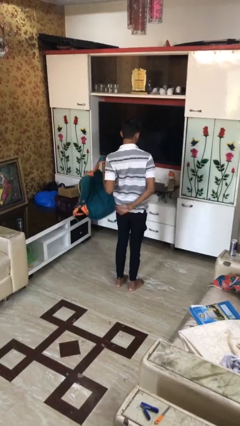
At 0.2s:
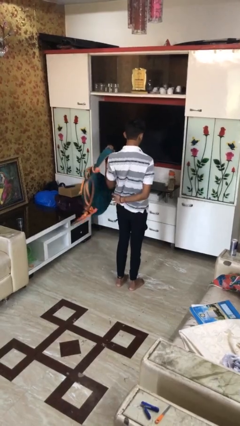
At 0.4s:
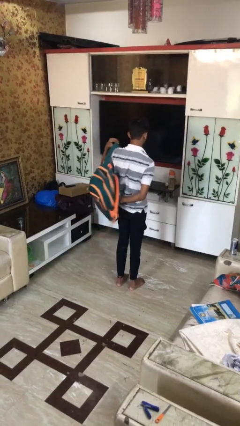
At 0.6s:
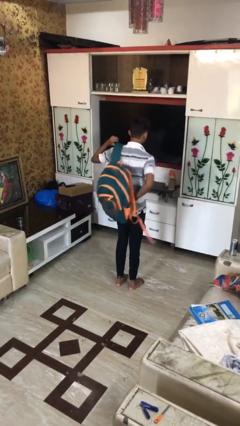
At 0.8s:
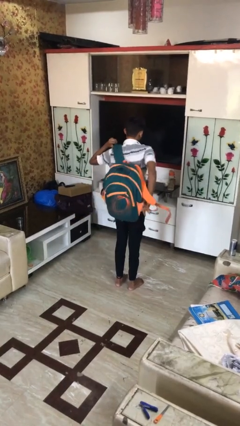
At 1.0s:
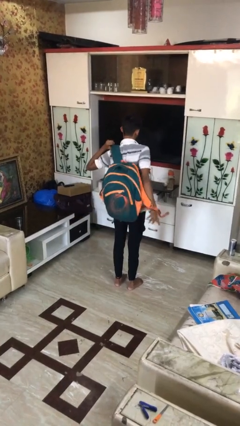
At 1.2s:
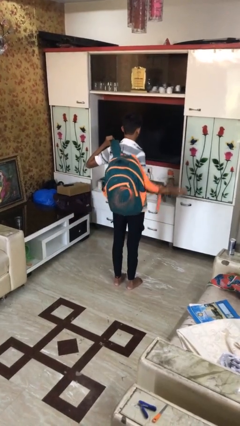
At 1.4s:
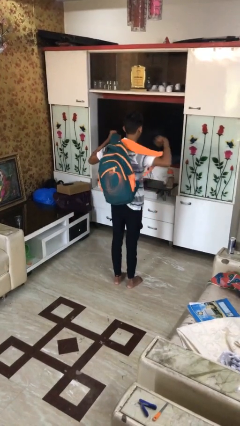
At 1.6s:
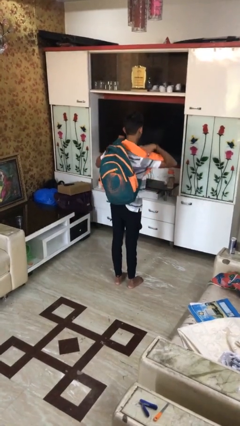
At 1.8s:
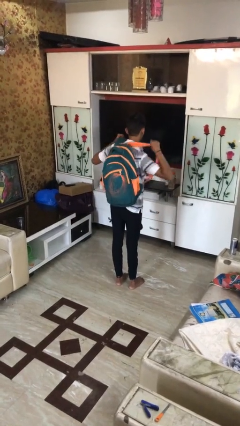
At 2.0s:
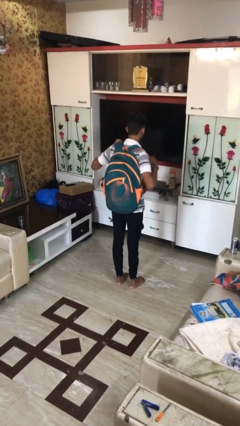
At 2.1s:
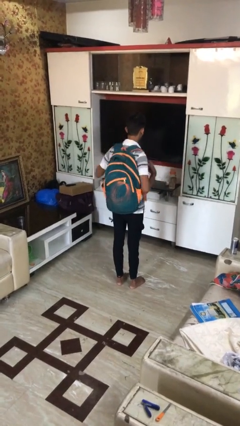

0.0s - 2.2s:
person puts on backpack

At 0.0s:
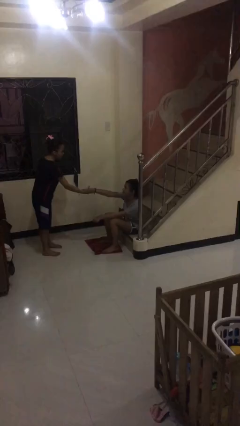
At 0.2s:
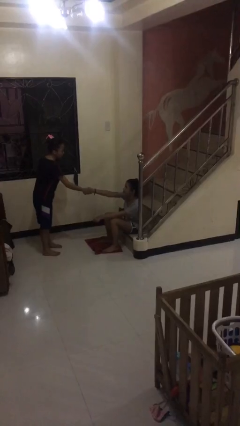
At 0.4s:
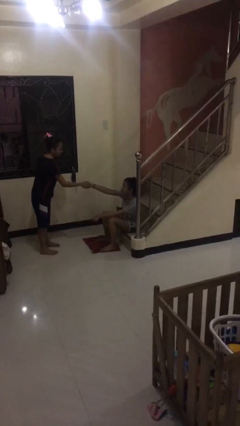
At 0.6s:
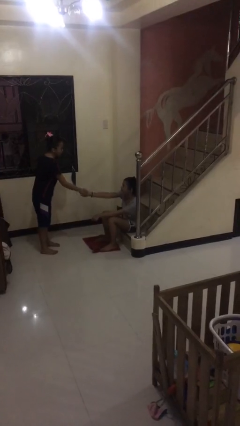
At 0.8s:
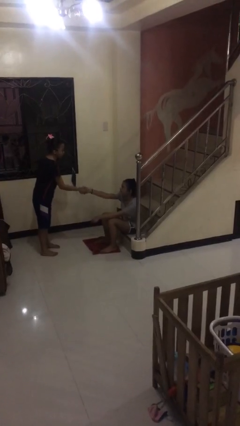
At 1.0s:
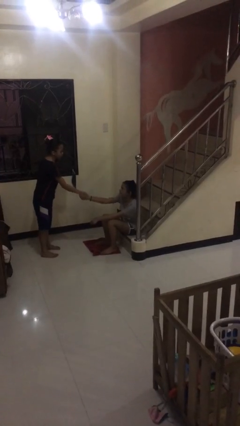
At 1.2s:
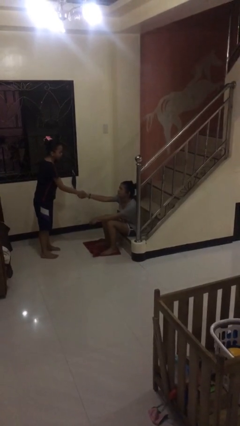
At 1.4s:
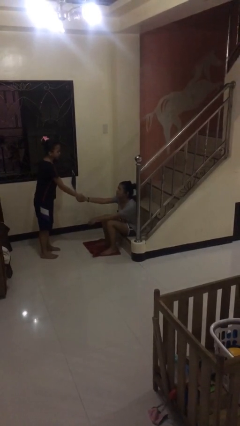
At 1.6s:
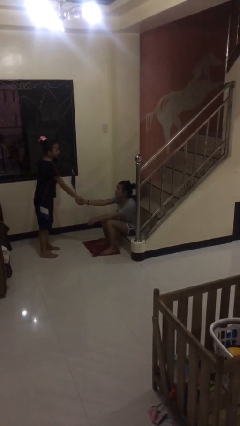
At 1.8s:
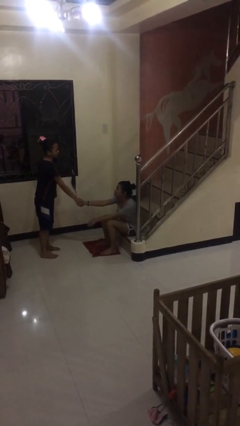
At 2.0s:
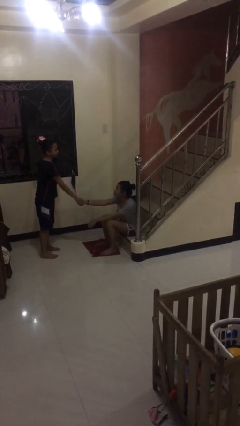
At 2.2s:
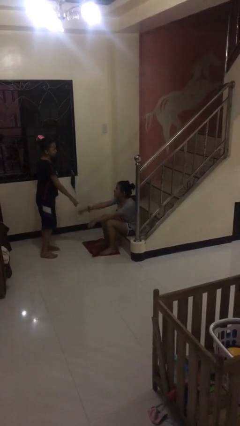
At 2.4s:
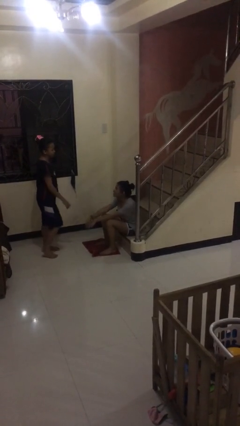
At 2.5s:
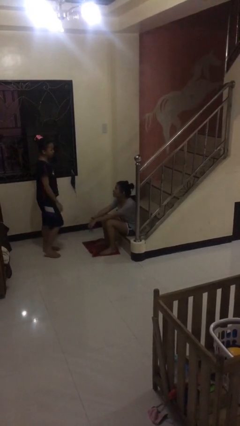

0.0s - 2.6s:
person shakes hand

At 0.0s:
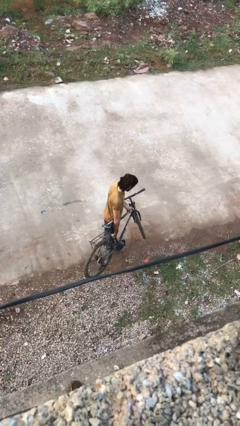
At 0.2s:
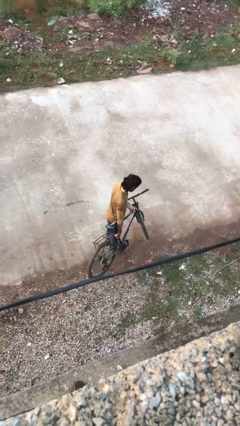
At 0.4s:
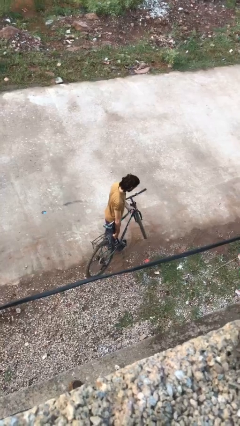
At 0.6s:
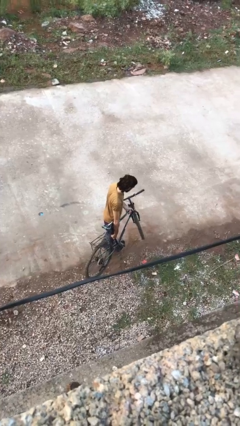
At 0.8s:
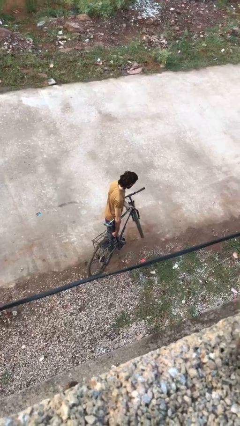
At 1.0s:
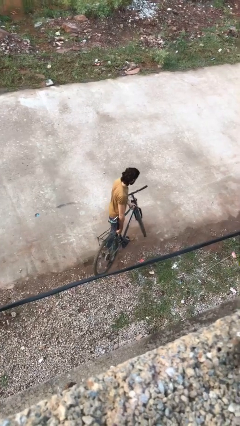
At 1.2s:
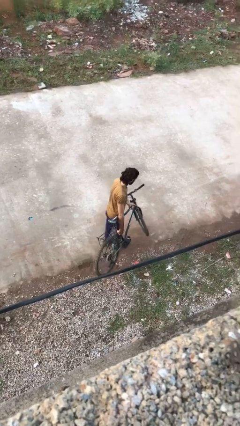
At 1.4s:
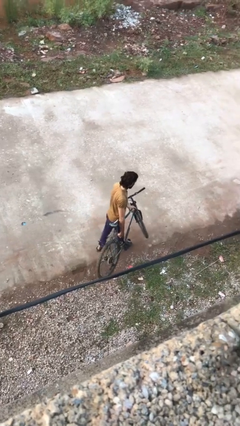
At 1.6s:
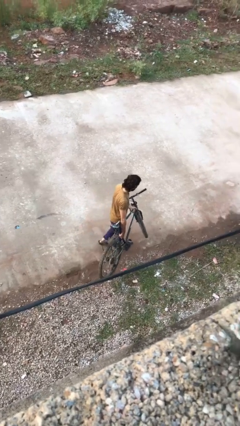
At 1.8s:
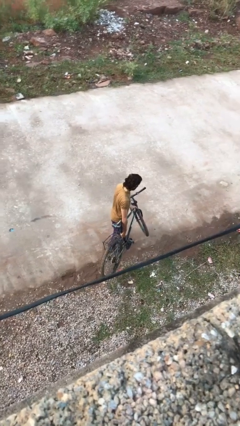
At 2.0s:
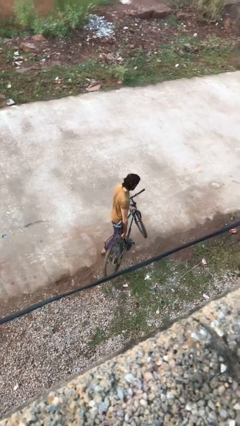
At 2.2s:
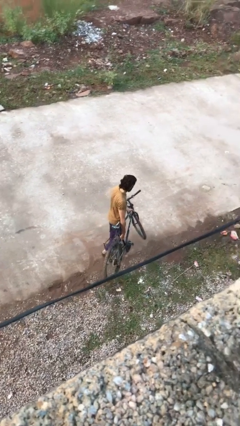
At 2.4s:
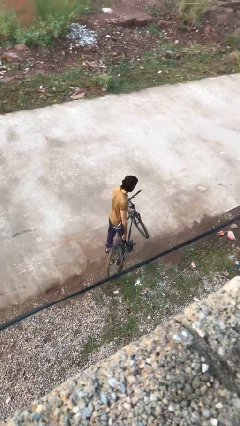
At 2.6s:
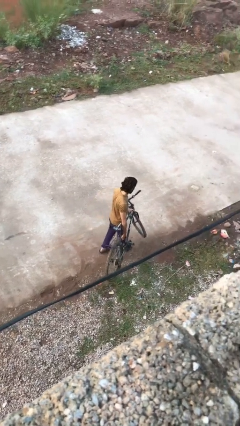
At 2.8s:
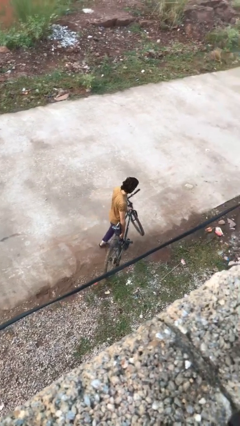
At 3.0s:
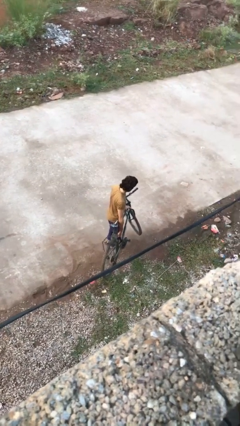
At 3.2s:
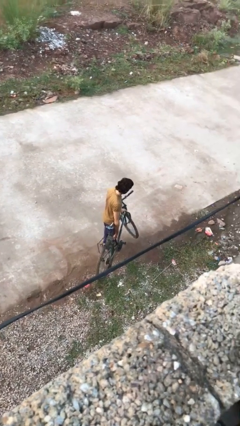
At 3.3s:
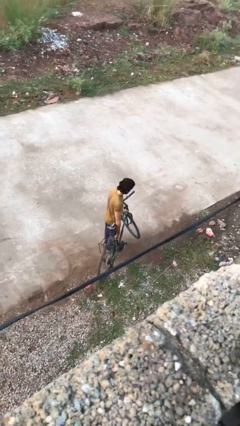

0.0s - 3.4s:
person carries bicycle

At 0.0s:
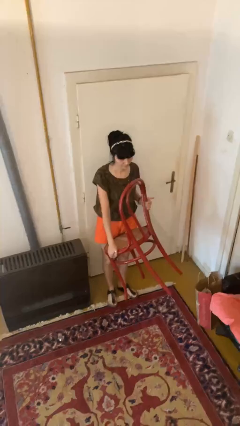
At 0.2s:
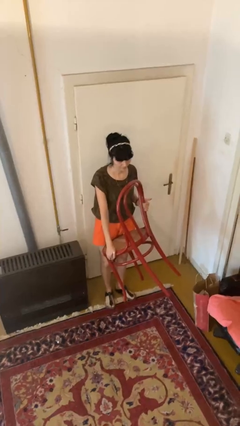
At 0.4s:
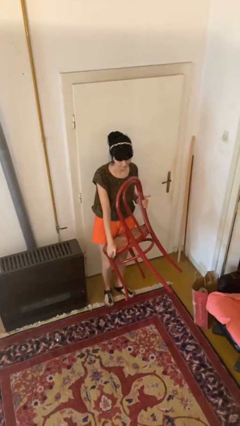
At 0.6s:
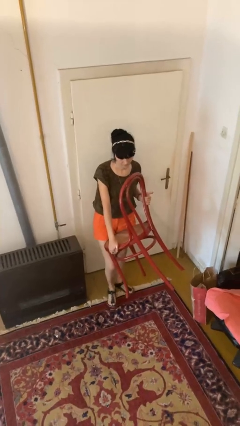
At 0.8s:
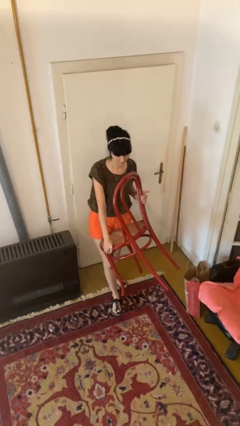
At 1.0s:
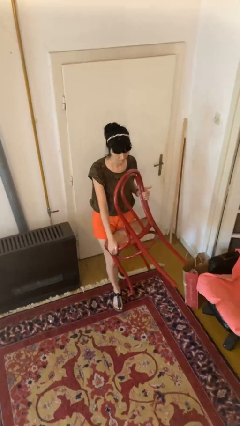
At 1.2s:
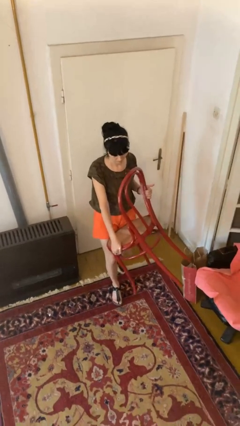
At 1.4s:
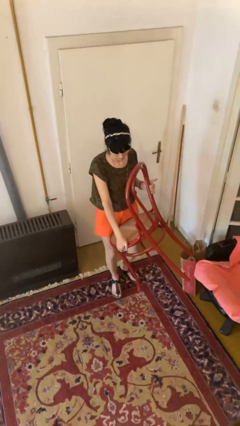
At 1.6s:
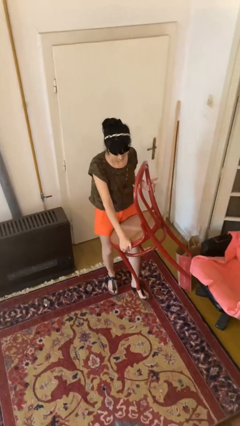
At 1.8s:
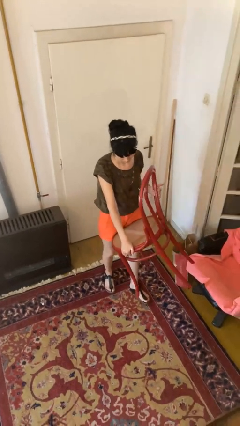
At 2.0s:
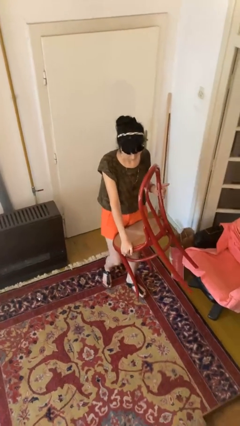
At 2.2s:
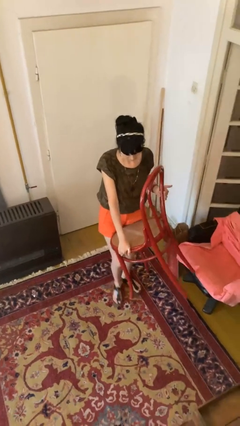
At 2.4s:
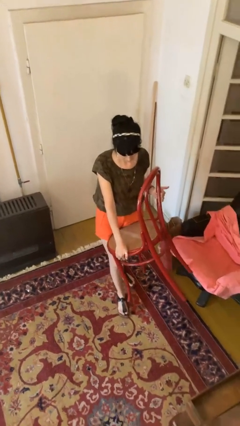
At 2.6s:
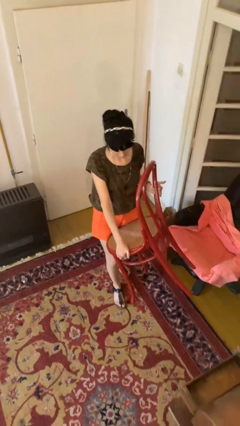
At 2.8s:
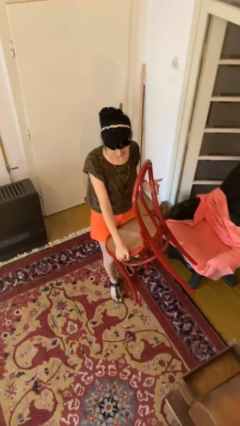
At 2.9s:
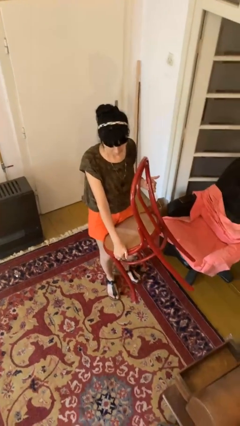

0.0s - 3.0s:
person carries furniture

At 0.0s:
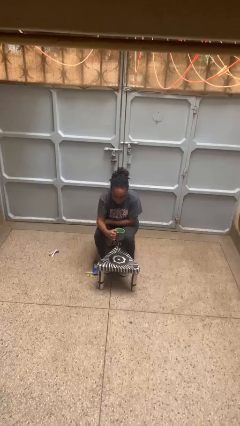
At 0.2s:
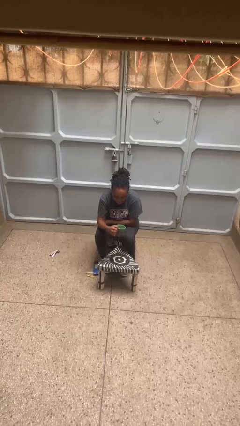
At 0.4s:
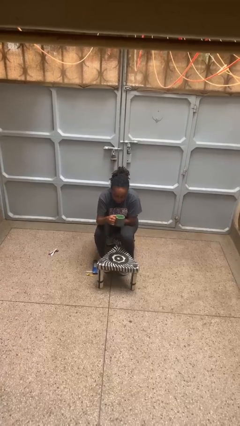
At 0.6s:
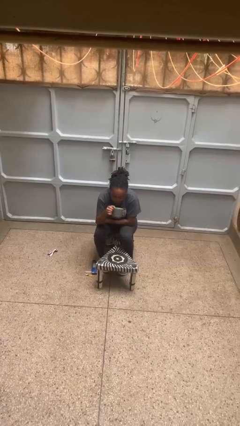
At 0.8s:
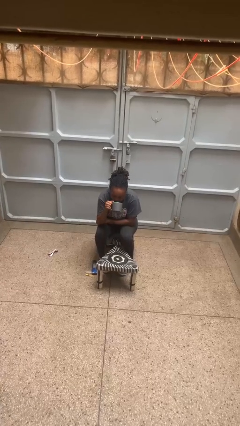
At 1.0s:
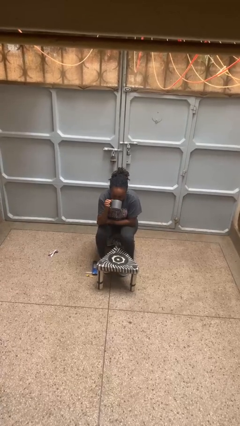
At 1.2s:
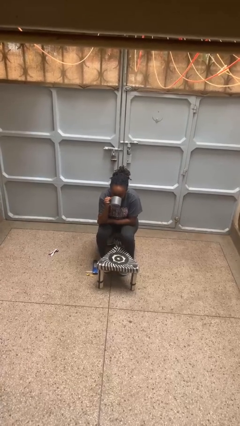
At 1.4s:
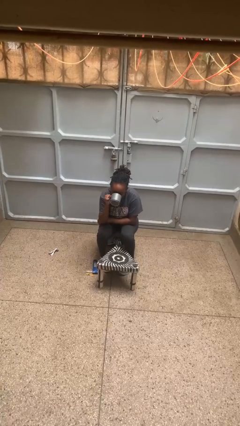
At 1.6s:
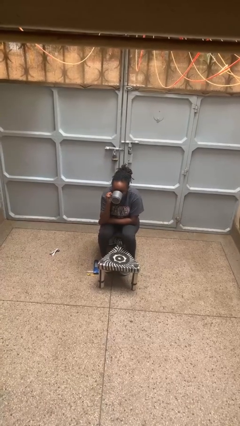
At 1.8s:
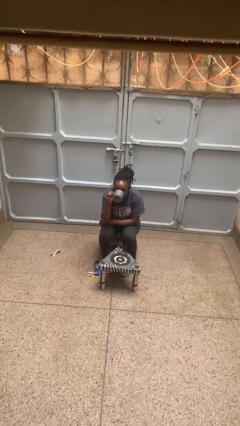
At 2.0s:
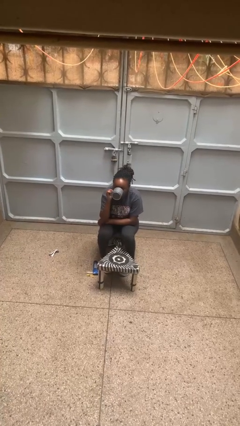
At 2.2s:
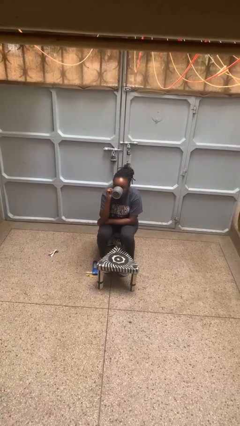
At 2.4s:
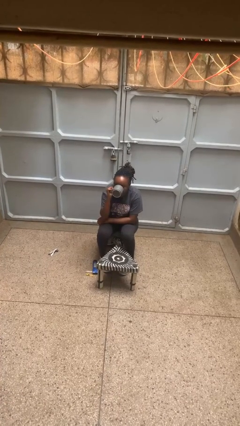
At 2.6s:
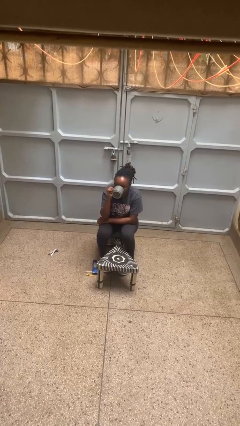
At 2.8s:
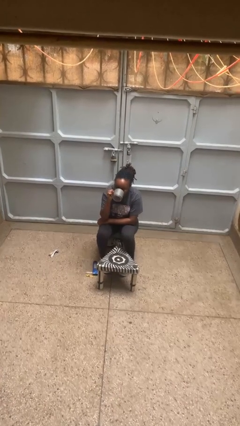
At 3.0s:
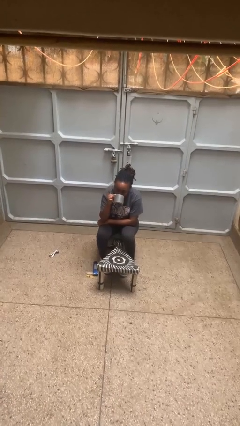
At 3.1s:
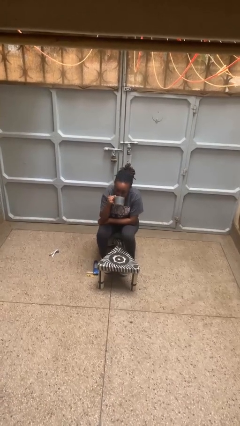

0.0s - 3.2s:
person drinks from mug

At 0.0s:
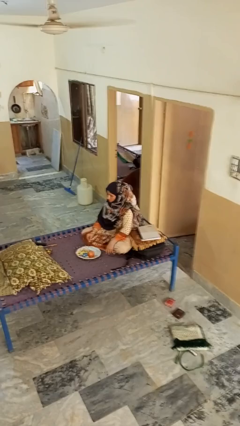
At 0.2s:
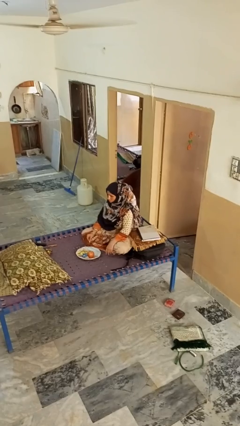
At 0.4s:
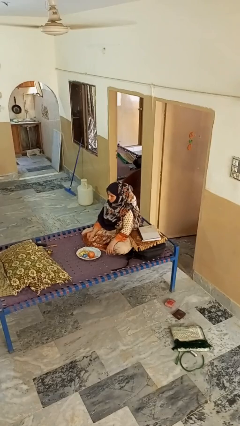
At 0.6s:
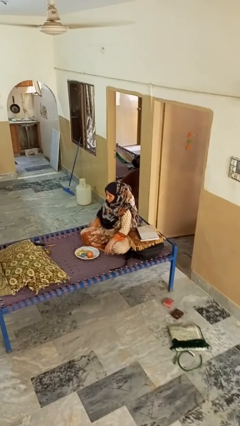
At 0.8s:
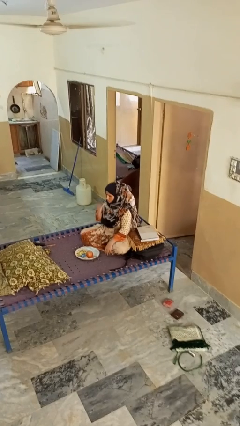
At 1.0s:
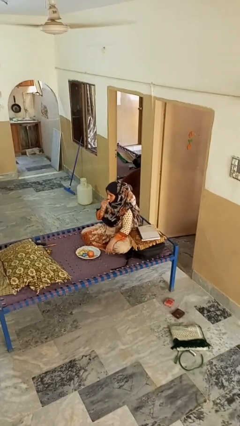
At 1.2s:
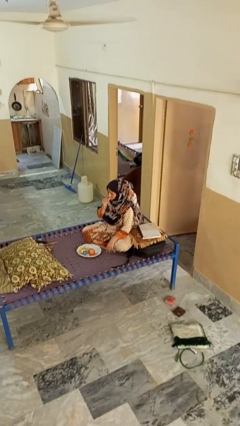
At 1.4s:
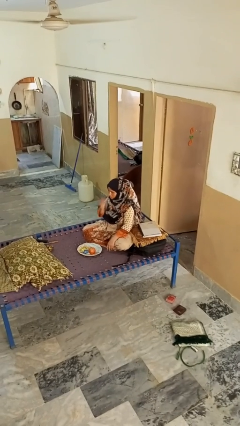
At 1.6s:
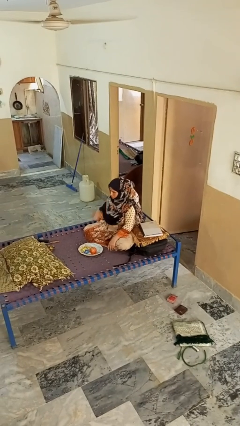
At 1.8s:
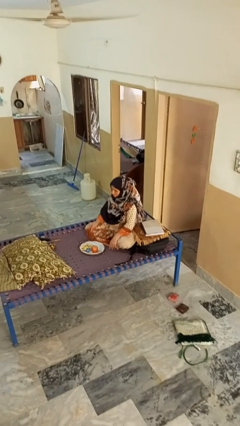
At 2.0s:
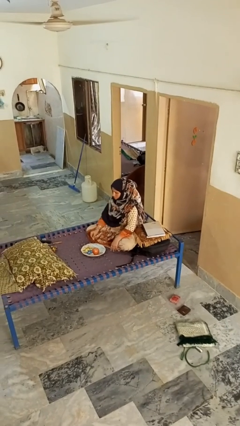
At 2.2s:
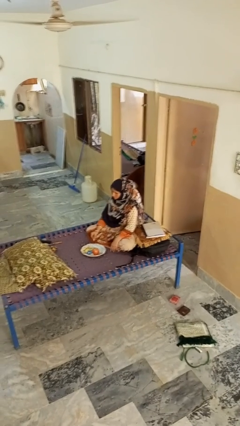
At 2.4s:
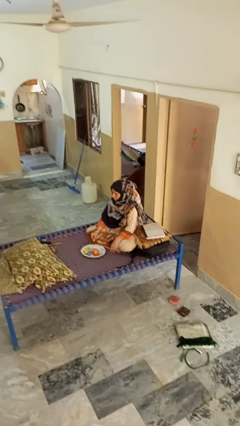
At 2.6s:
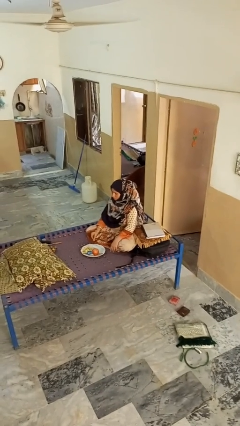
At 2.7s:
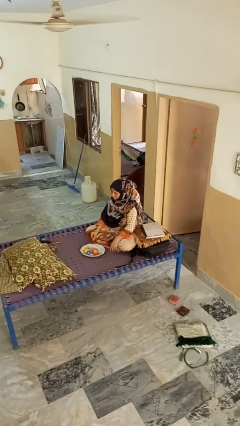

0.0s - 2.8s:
person eats apple

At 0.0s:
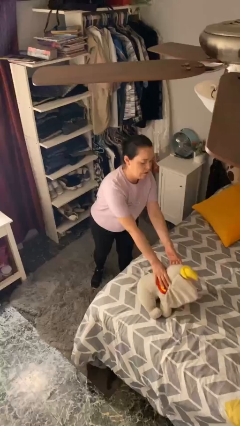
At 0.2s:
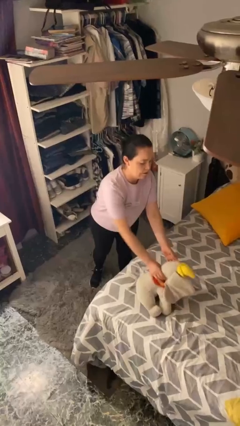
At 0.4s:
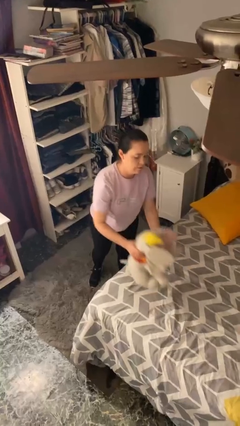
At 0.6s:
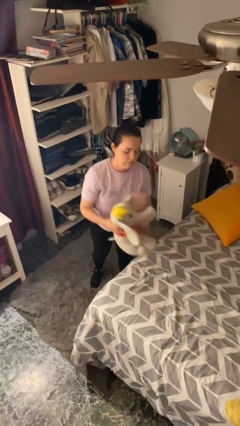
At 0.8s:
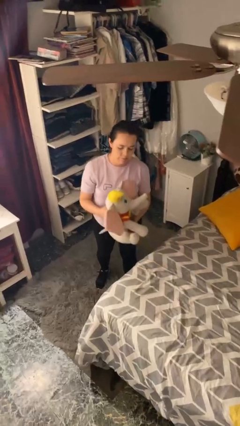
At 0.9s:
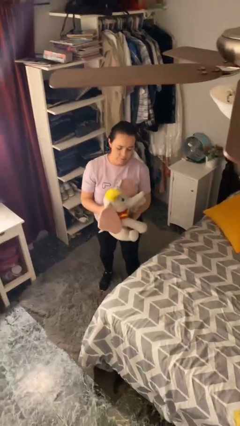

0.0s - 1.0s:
person picks up object from bed
